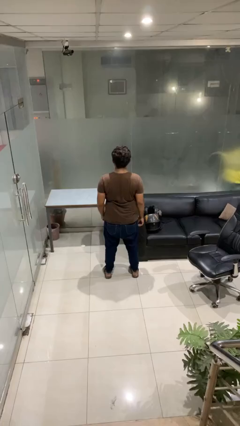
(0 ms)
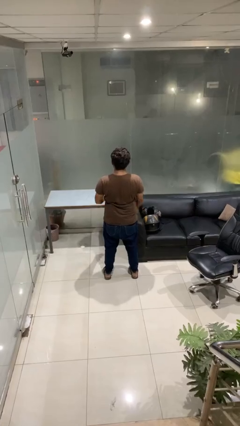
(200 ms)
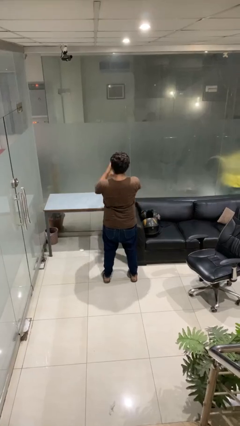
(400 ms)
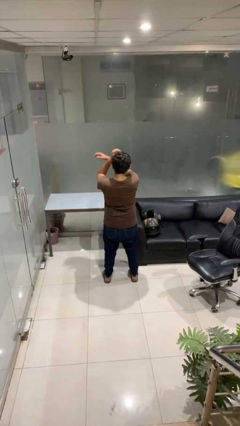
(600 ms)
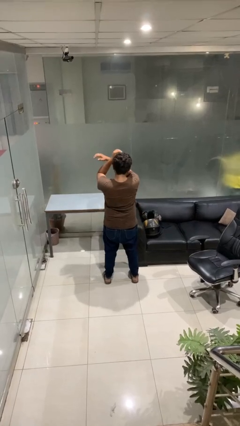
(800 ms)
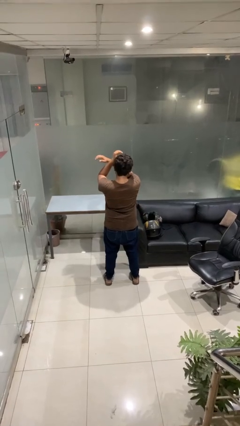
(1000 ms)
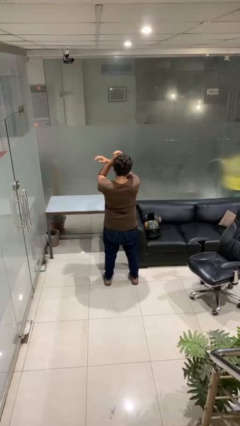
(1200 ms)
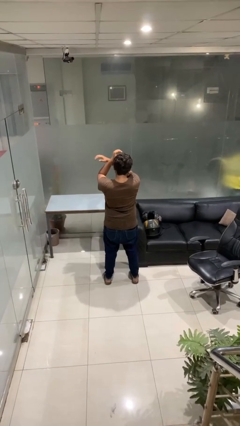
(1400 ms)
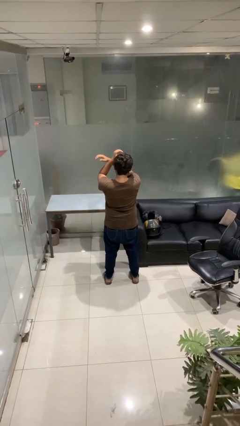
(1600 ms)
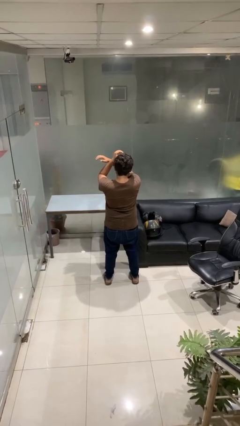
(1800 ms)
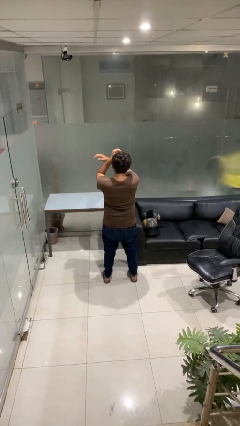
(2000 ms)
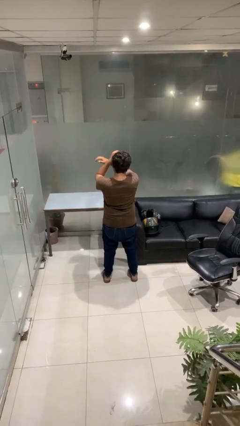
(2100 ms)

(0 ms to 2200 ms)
person gestures arms x

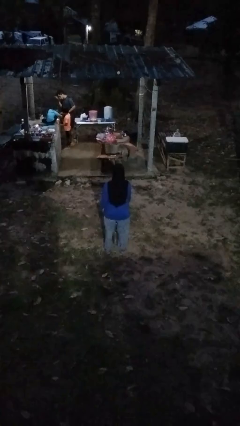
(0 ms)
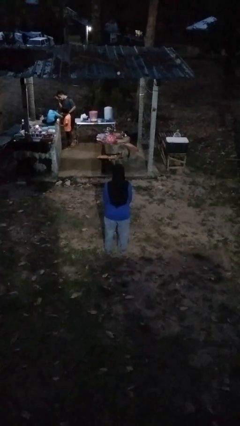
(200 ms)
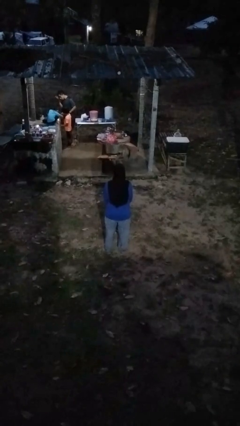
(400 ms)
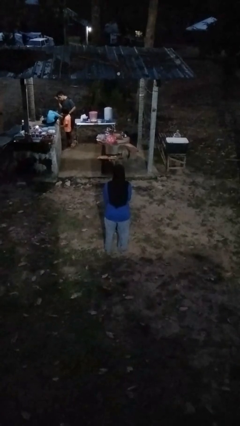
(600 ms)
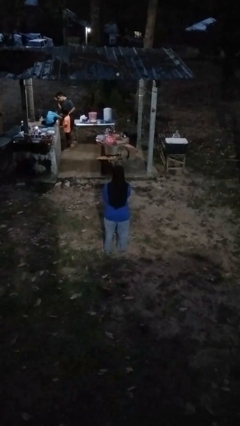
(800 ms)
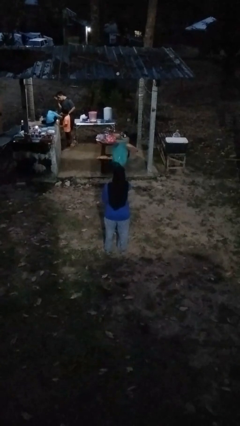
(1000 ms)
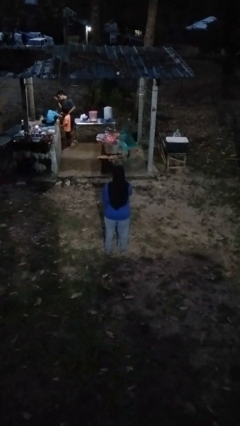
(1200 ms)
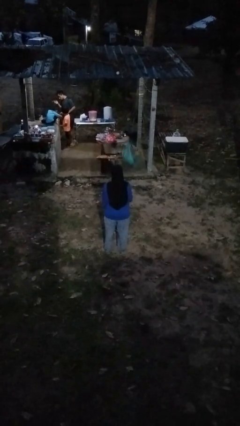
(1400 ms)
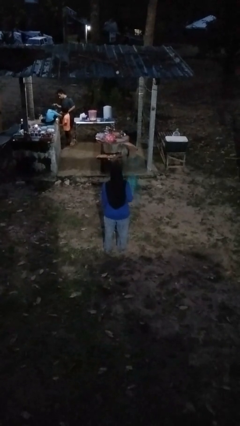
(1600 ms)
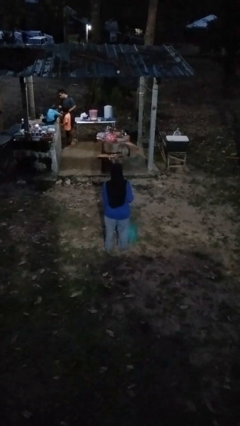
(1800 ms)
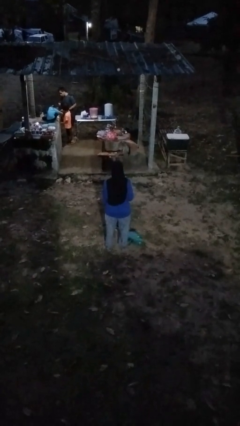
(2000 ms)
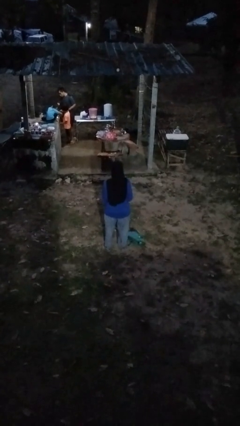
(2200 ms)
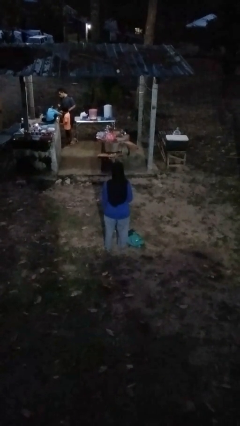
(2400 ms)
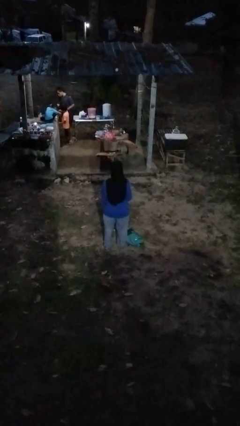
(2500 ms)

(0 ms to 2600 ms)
person throws object into air

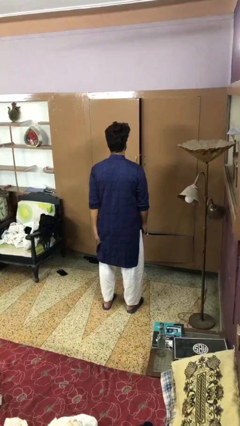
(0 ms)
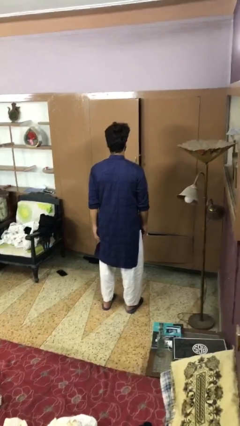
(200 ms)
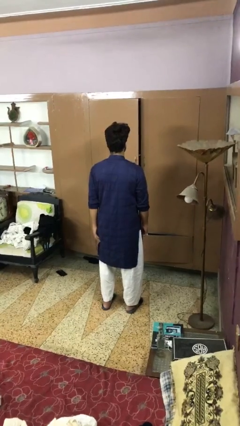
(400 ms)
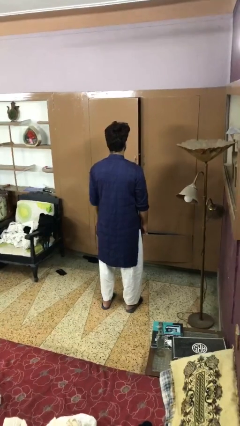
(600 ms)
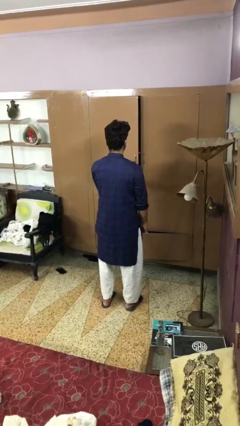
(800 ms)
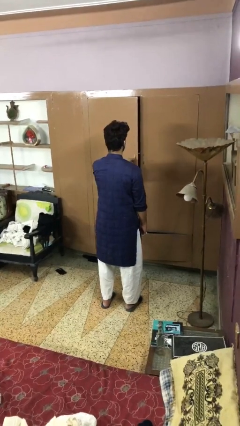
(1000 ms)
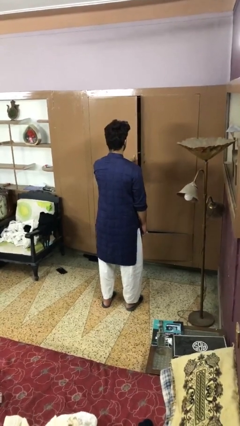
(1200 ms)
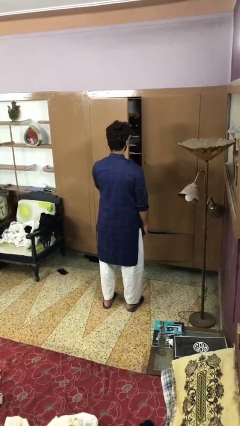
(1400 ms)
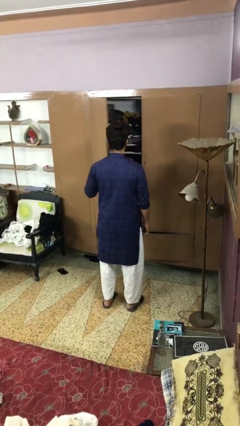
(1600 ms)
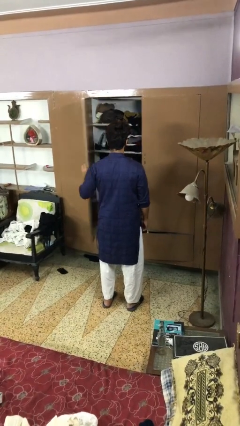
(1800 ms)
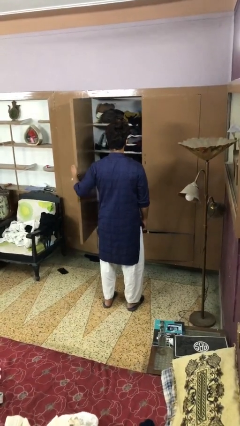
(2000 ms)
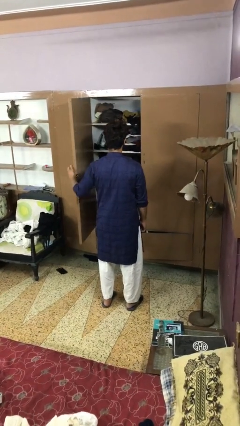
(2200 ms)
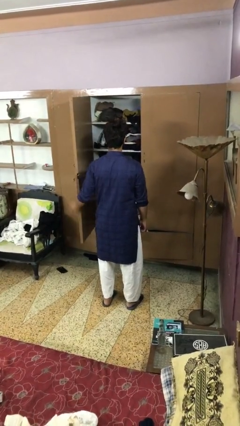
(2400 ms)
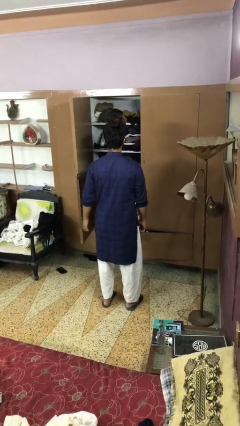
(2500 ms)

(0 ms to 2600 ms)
person opens closet door

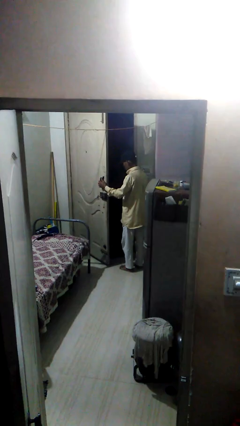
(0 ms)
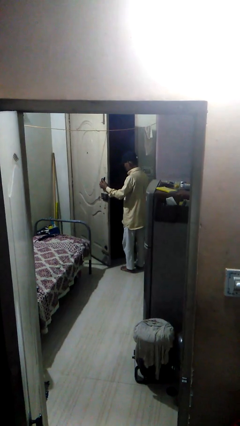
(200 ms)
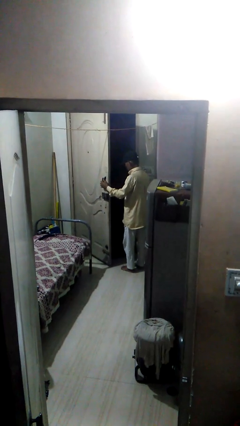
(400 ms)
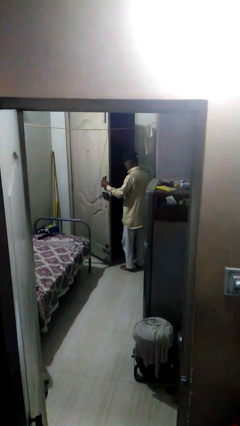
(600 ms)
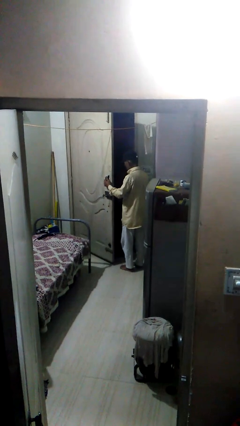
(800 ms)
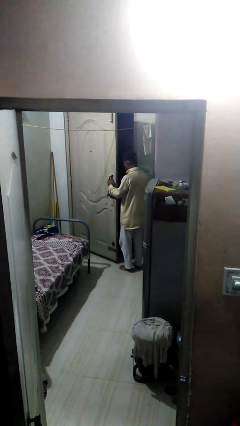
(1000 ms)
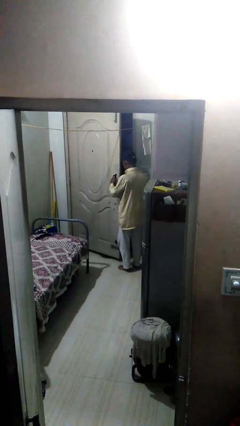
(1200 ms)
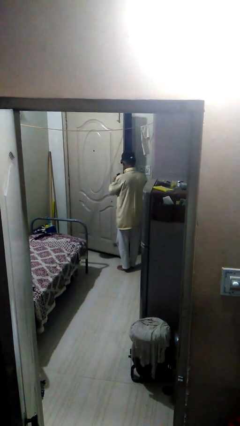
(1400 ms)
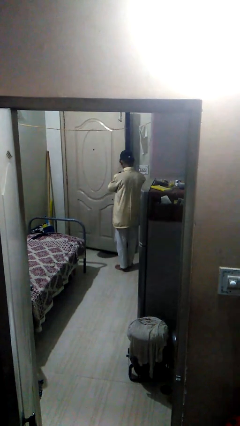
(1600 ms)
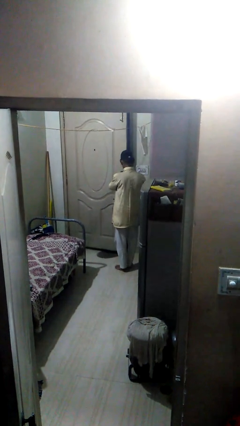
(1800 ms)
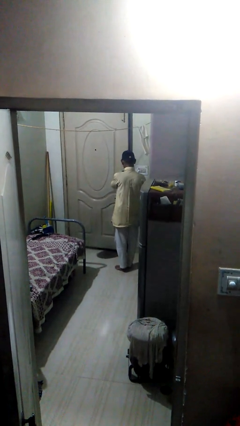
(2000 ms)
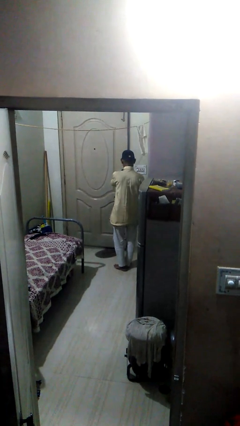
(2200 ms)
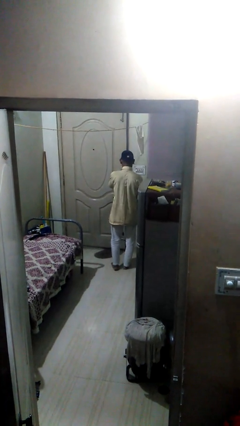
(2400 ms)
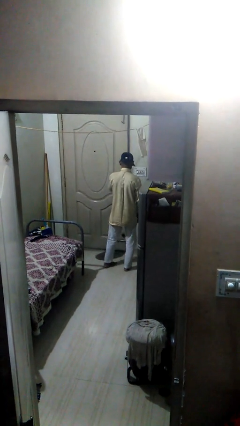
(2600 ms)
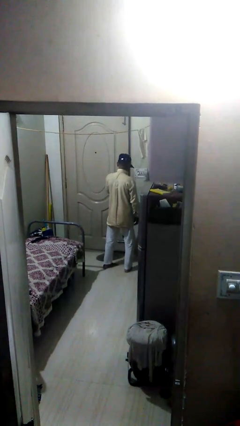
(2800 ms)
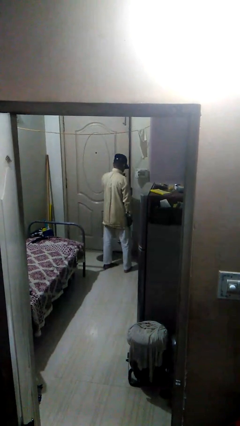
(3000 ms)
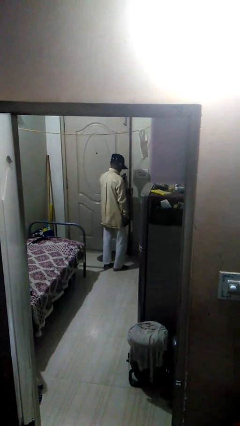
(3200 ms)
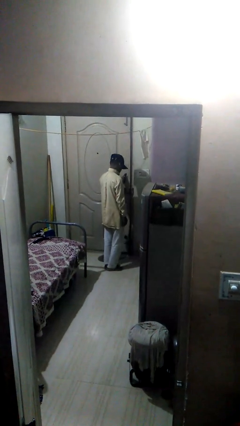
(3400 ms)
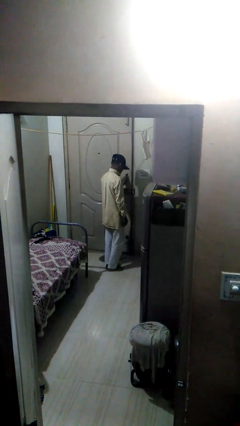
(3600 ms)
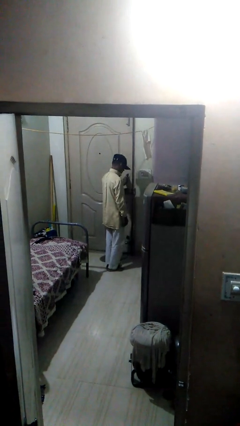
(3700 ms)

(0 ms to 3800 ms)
person closes facility door

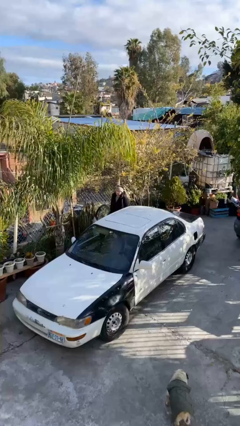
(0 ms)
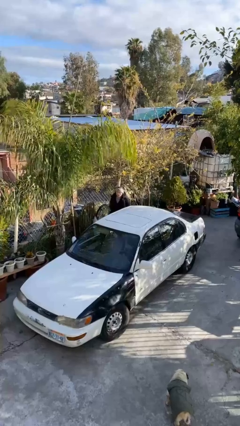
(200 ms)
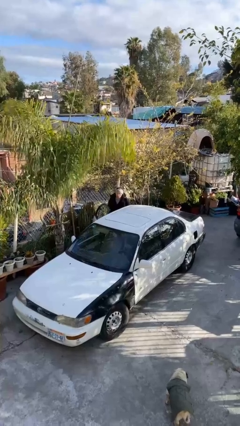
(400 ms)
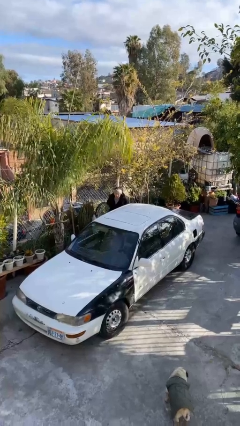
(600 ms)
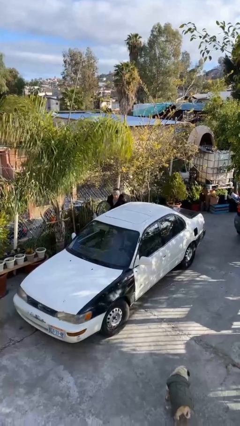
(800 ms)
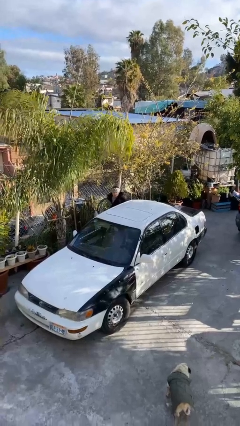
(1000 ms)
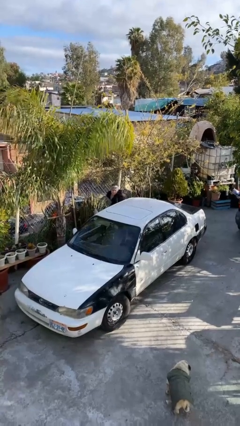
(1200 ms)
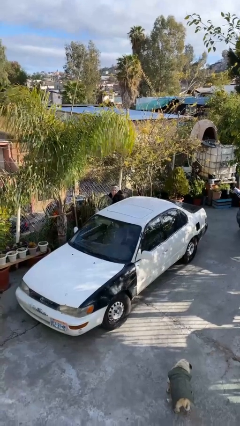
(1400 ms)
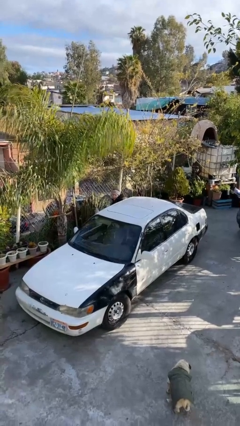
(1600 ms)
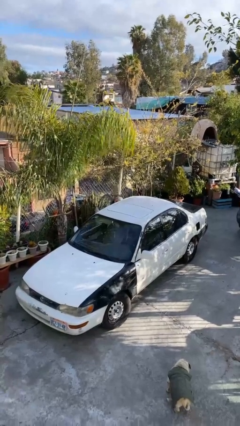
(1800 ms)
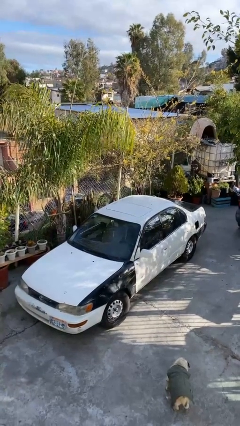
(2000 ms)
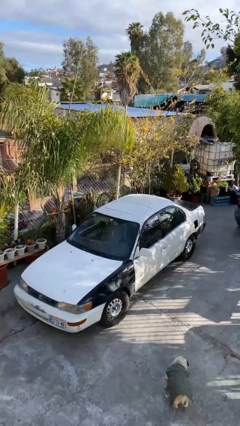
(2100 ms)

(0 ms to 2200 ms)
person enters car

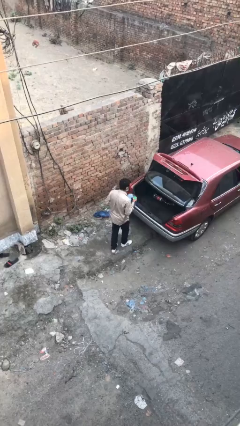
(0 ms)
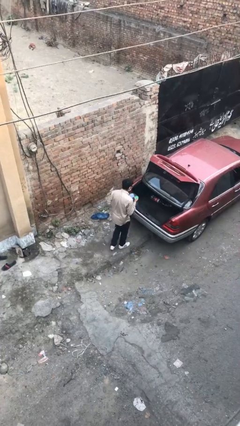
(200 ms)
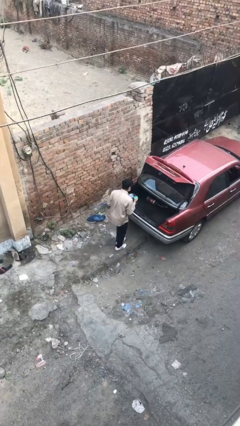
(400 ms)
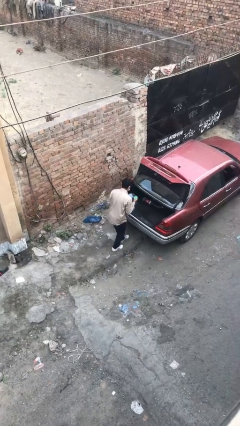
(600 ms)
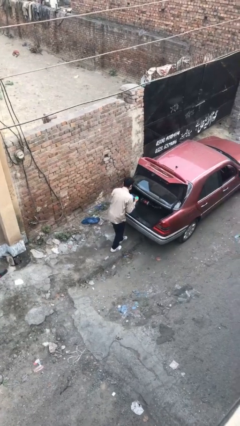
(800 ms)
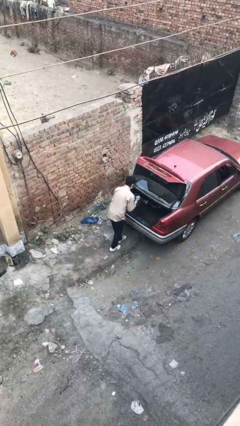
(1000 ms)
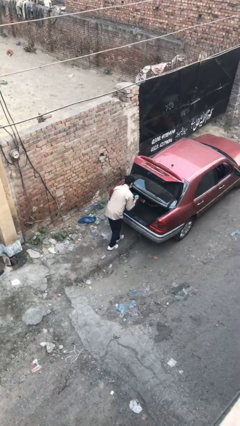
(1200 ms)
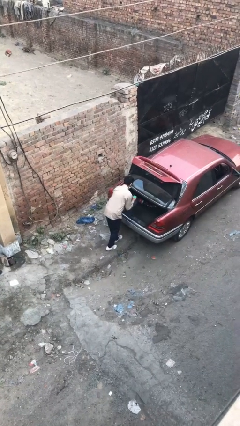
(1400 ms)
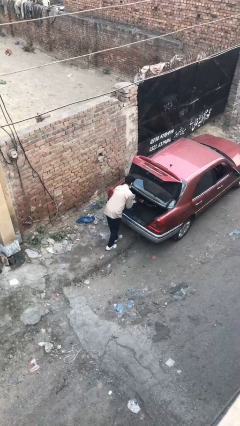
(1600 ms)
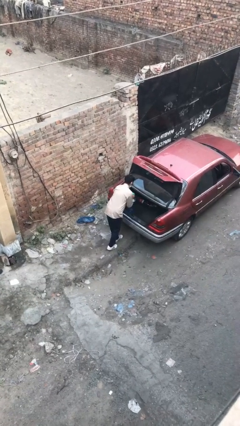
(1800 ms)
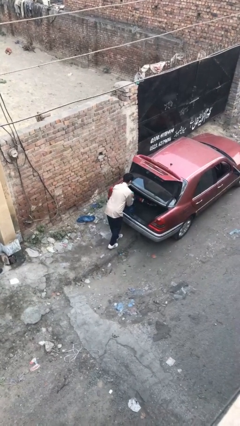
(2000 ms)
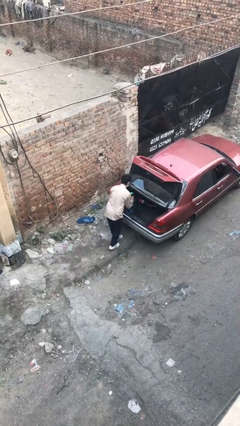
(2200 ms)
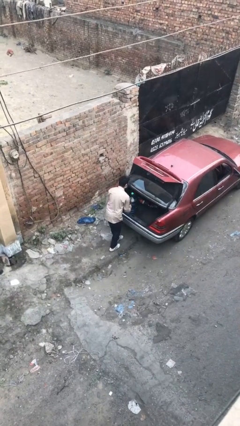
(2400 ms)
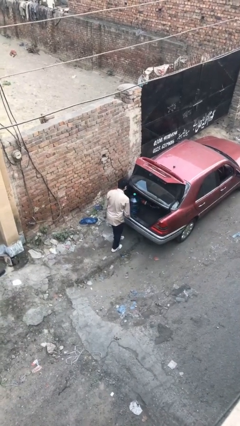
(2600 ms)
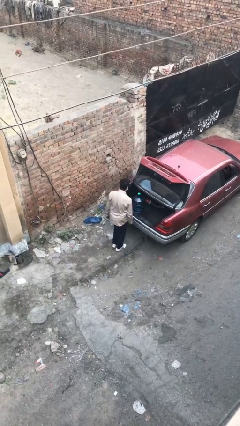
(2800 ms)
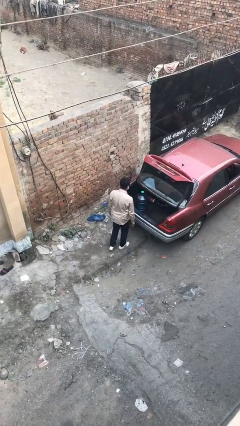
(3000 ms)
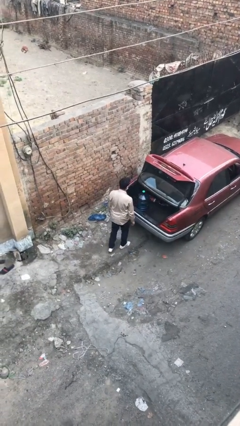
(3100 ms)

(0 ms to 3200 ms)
person loads car

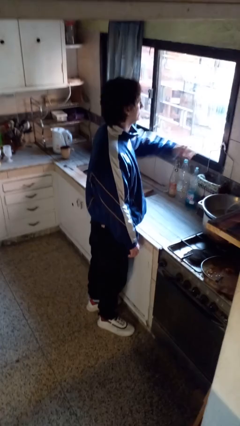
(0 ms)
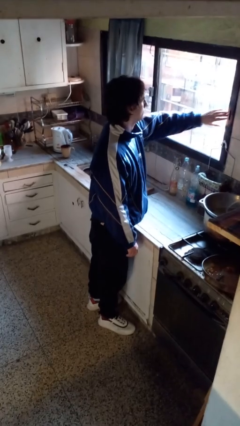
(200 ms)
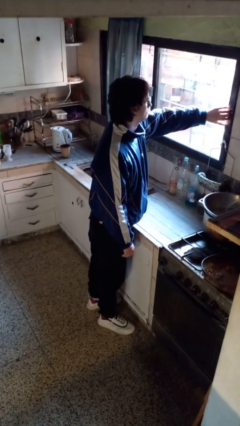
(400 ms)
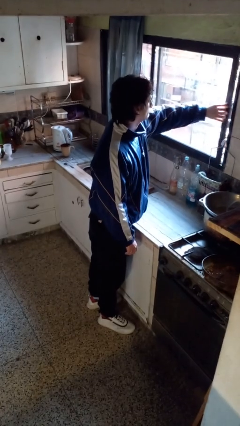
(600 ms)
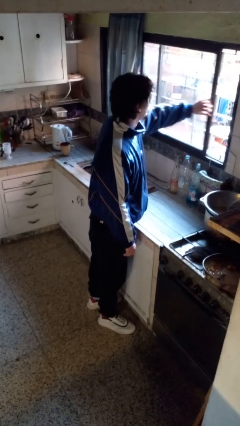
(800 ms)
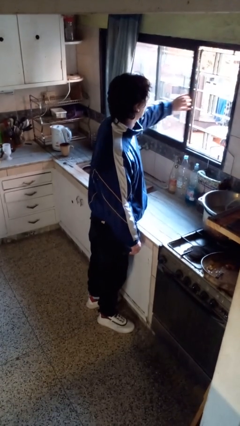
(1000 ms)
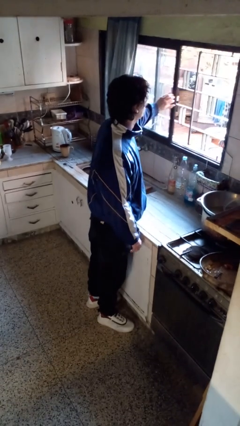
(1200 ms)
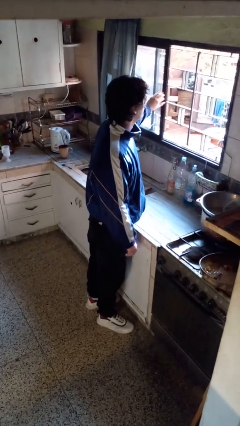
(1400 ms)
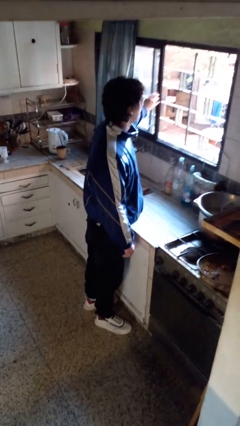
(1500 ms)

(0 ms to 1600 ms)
person opens home window
